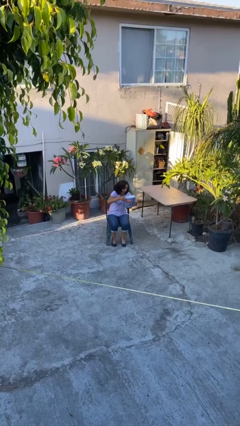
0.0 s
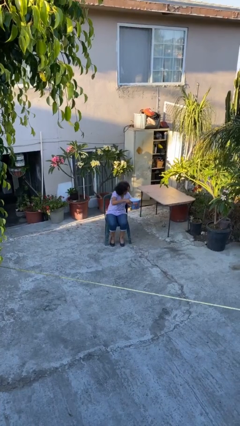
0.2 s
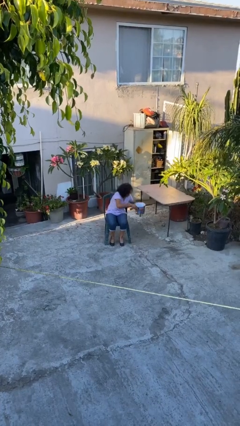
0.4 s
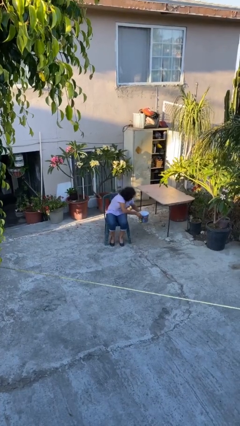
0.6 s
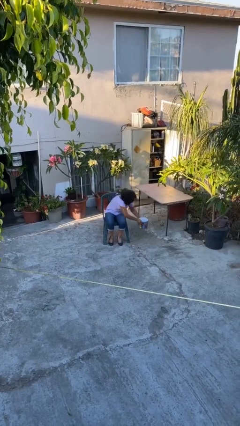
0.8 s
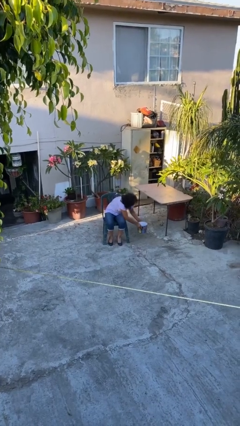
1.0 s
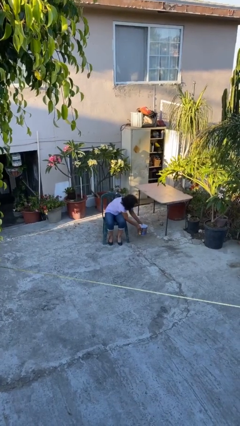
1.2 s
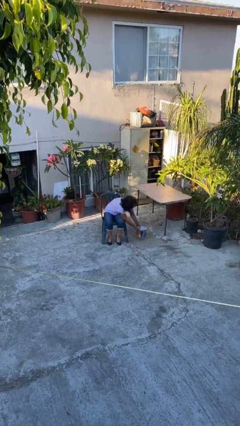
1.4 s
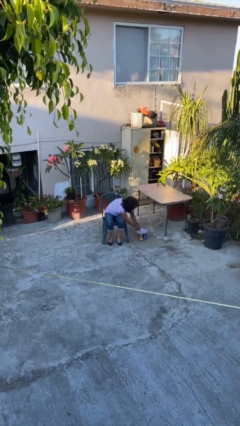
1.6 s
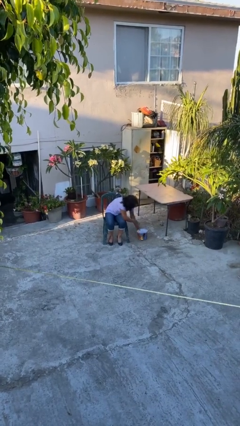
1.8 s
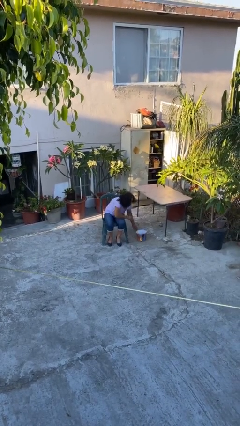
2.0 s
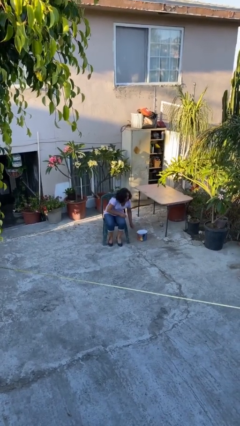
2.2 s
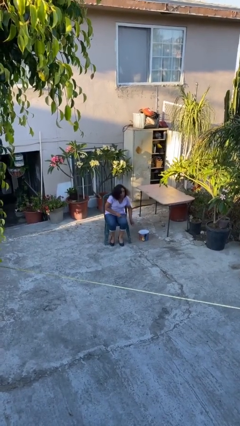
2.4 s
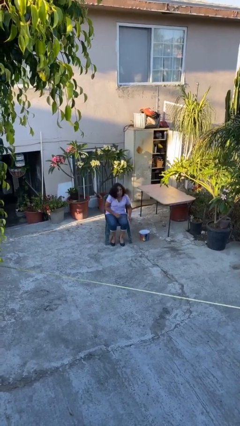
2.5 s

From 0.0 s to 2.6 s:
person puts down object on floor

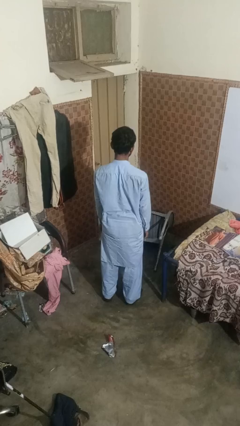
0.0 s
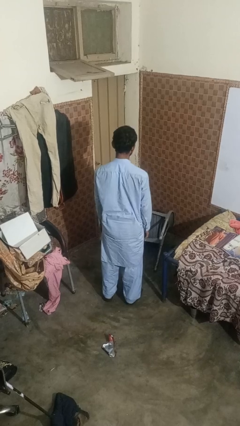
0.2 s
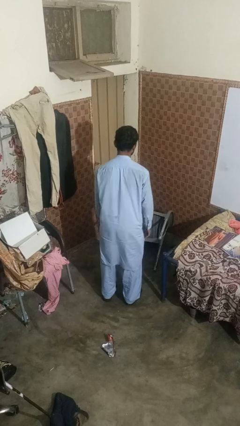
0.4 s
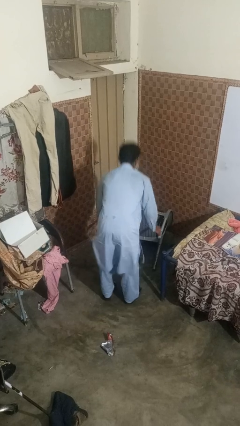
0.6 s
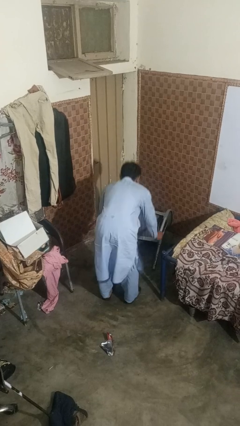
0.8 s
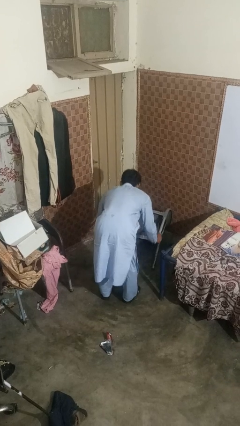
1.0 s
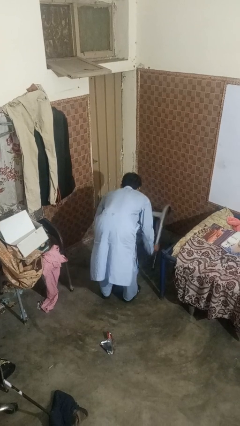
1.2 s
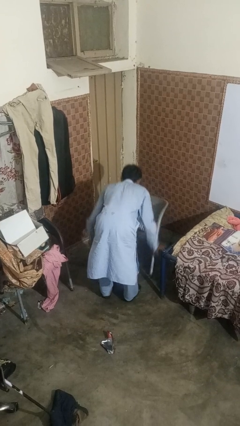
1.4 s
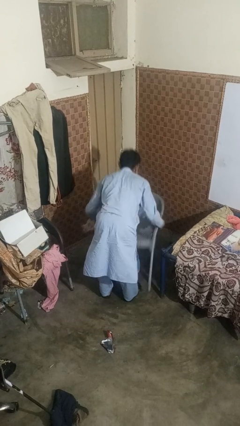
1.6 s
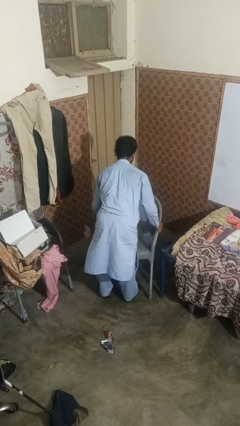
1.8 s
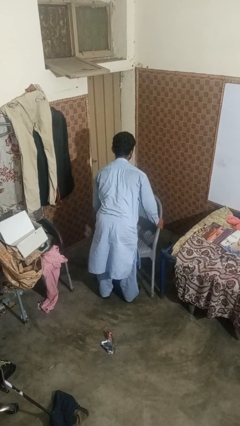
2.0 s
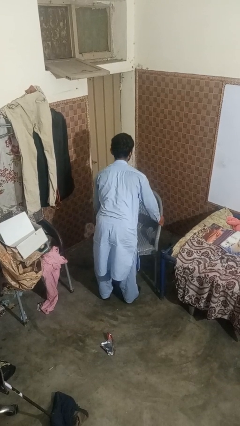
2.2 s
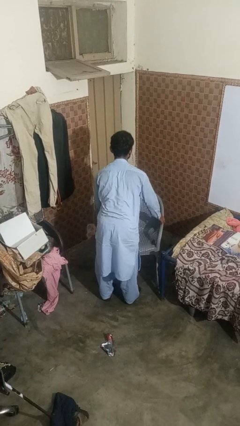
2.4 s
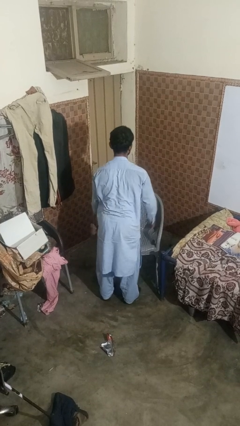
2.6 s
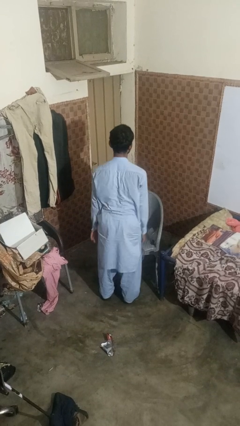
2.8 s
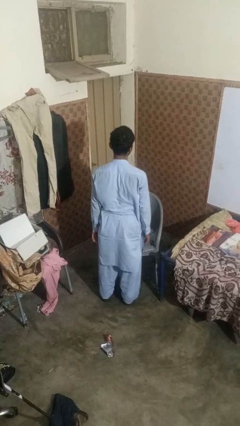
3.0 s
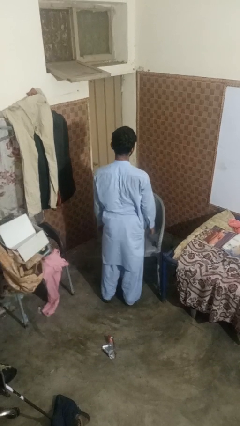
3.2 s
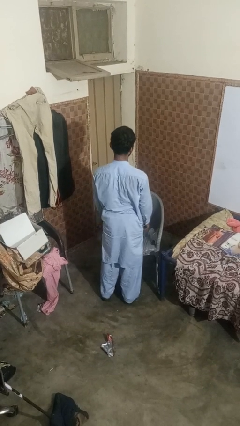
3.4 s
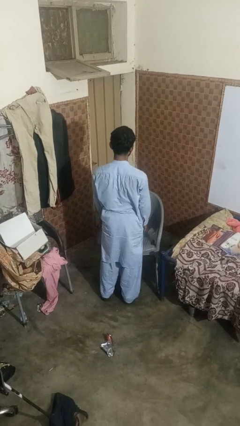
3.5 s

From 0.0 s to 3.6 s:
person sets upright furniture

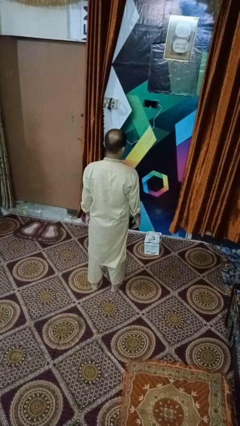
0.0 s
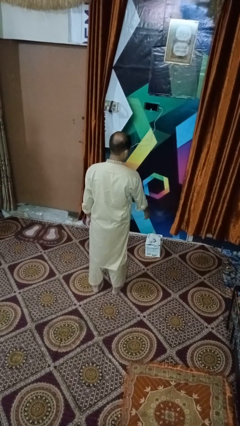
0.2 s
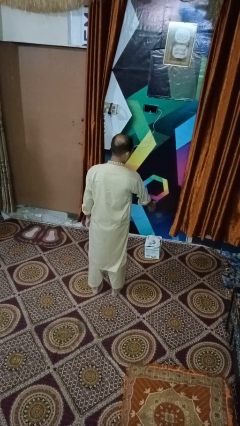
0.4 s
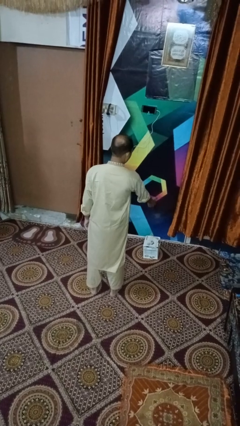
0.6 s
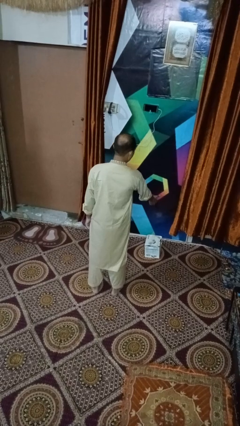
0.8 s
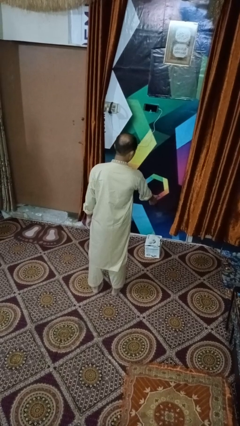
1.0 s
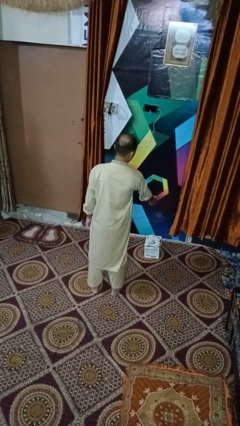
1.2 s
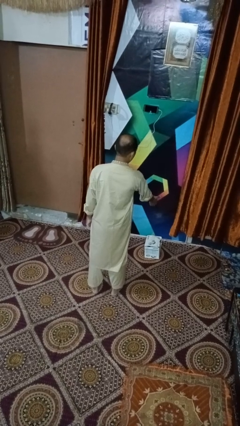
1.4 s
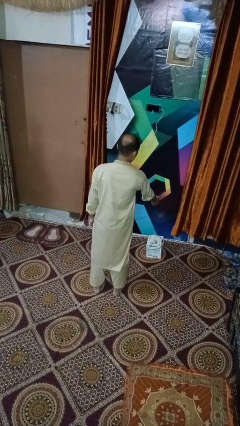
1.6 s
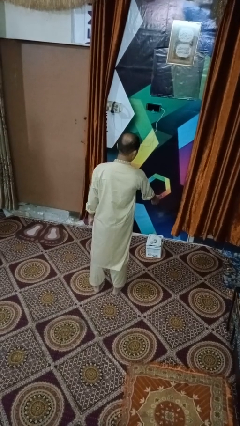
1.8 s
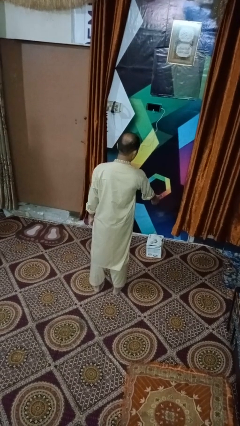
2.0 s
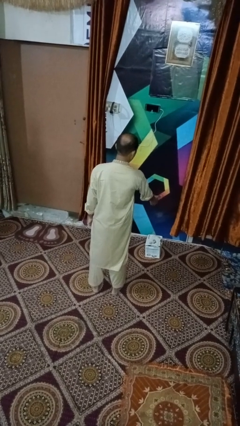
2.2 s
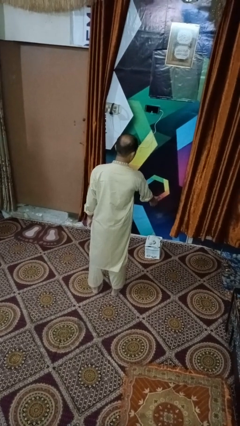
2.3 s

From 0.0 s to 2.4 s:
person waves hand over object

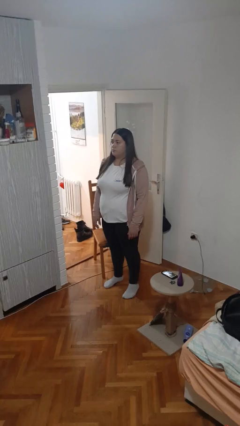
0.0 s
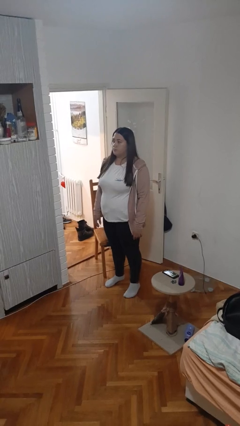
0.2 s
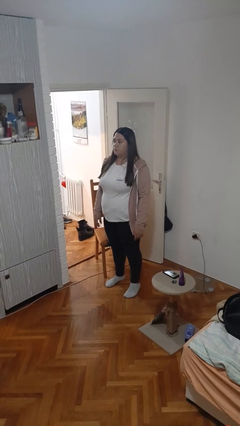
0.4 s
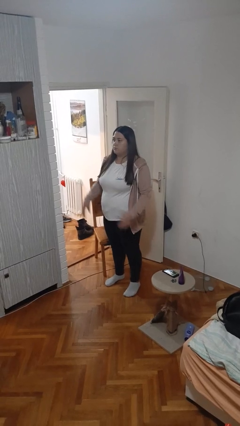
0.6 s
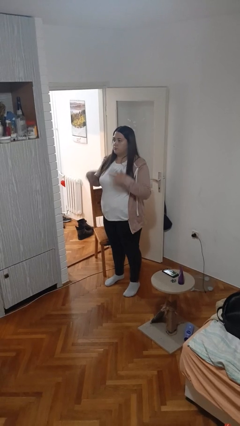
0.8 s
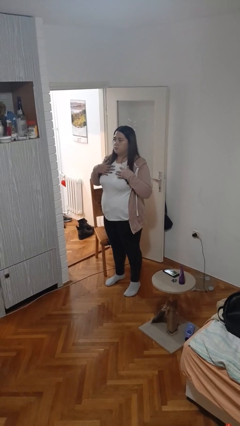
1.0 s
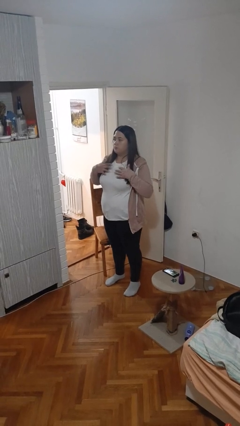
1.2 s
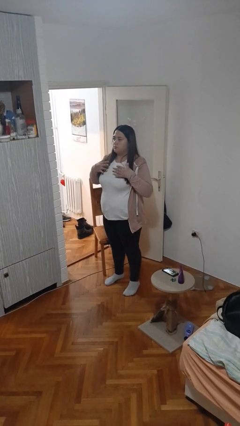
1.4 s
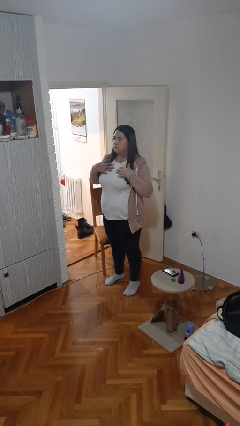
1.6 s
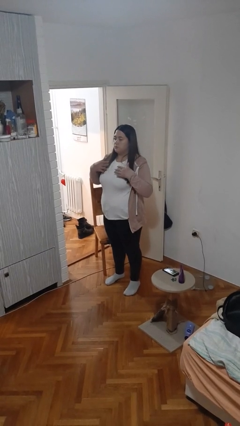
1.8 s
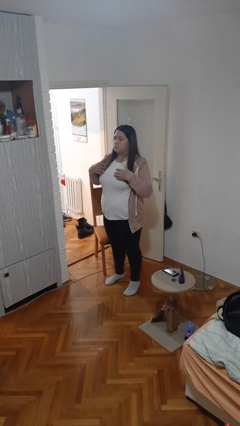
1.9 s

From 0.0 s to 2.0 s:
person drums on chest

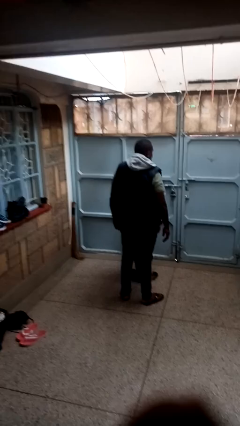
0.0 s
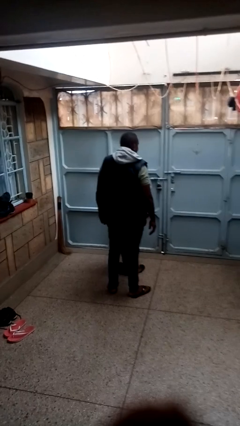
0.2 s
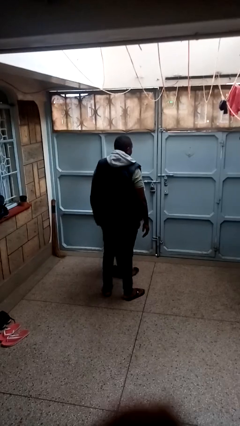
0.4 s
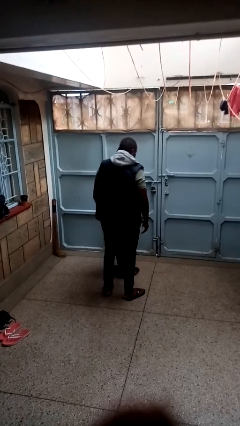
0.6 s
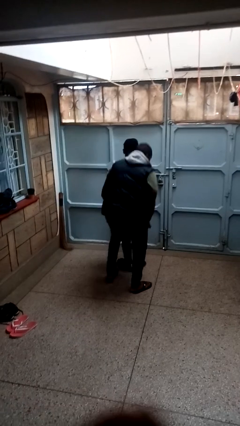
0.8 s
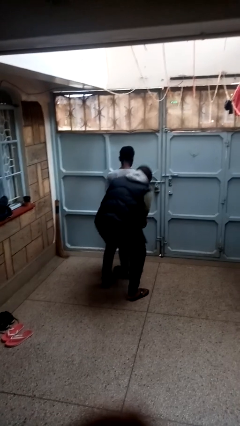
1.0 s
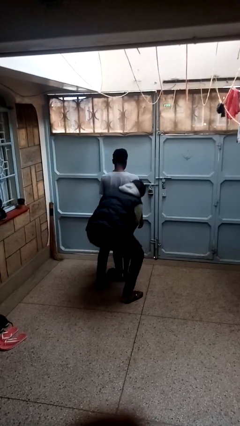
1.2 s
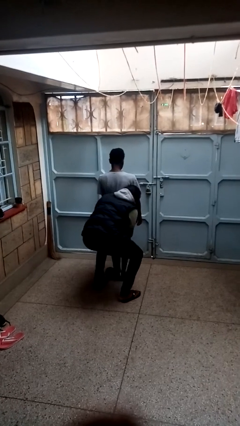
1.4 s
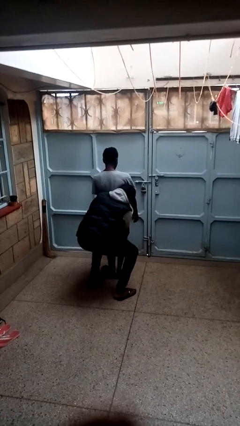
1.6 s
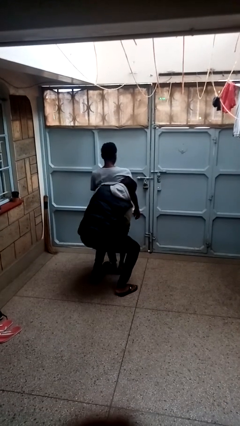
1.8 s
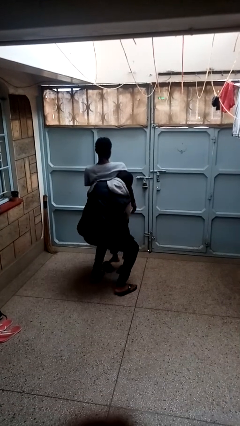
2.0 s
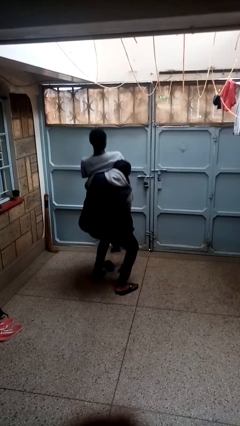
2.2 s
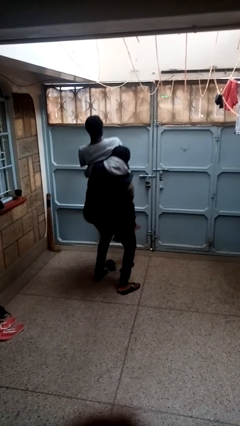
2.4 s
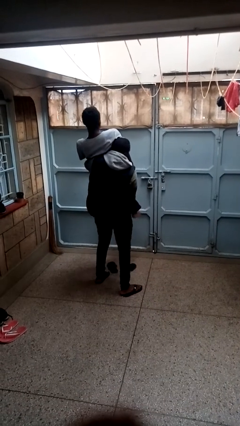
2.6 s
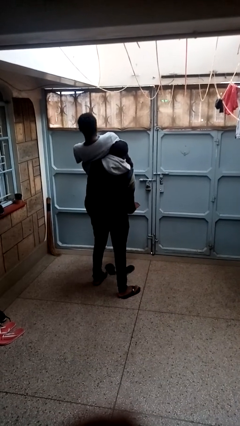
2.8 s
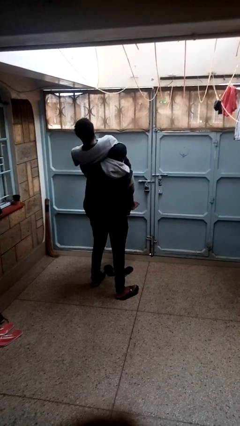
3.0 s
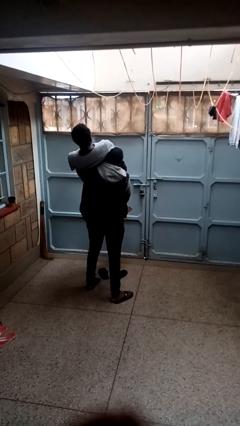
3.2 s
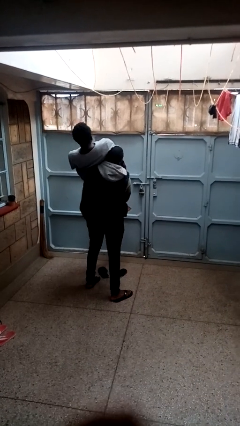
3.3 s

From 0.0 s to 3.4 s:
person carries person over shoulder

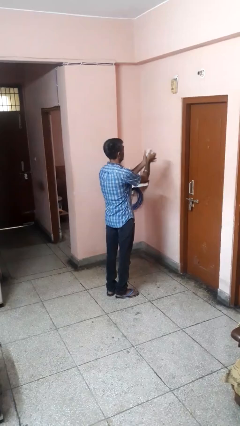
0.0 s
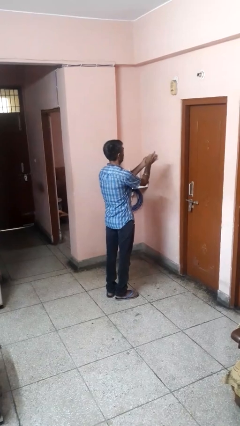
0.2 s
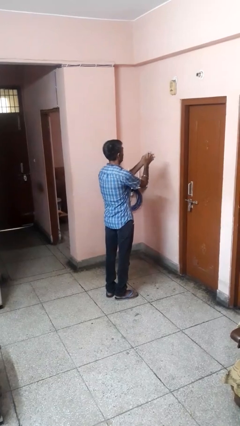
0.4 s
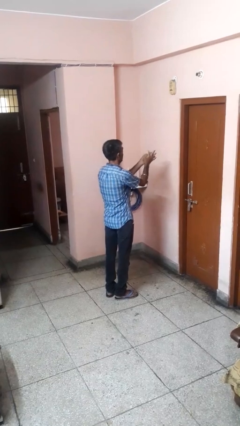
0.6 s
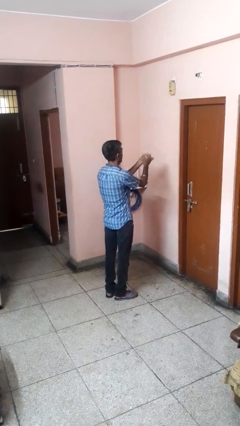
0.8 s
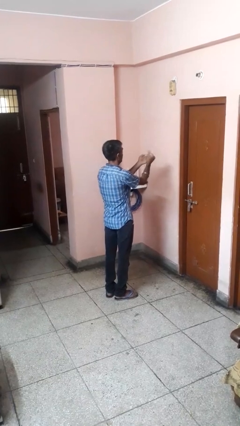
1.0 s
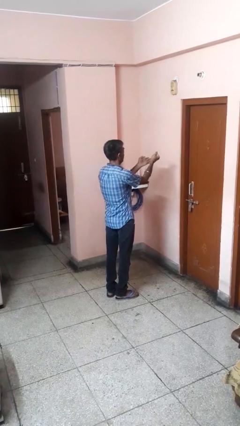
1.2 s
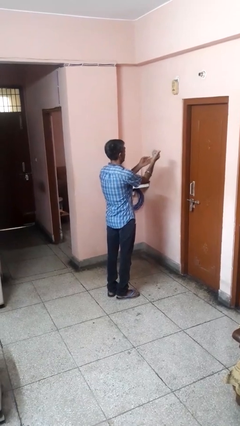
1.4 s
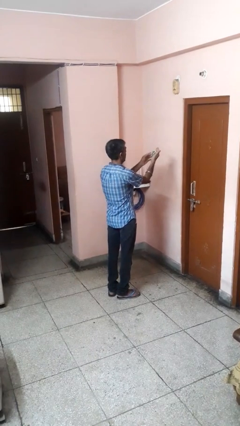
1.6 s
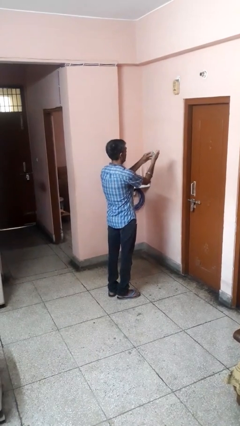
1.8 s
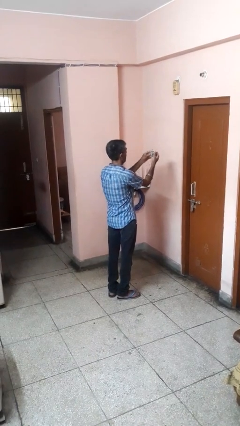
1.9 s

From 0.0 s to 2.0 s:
person crumples paper

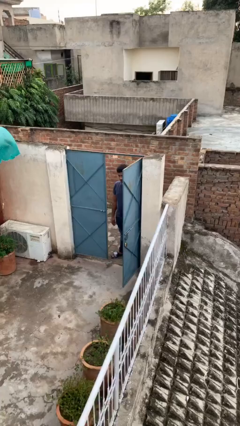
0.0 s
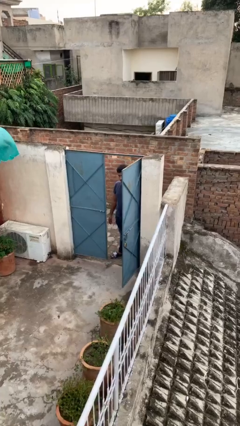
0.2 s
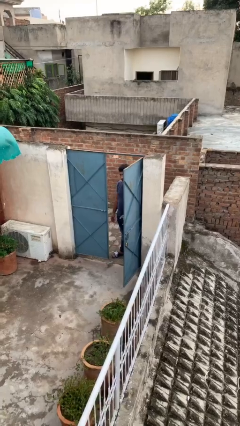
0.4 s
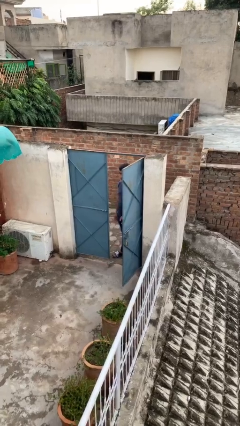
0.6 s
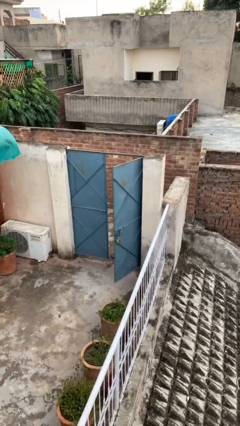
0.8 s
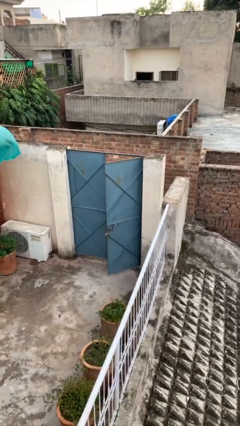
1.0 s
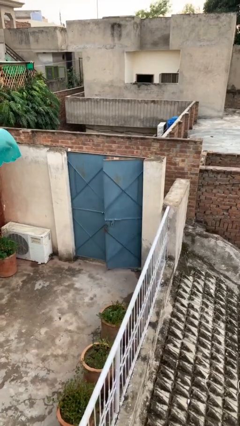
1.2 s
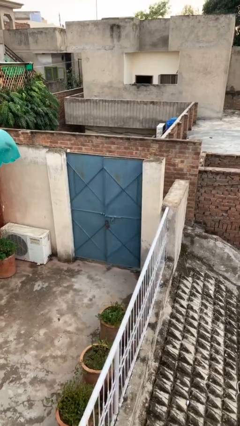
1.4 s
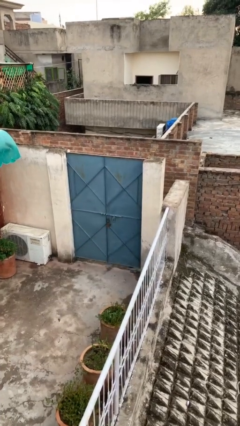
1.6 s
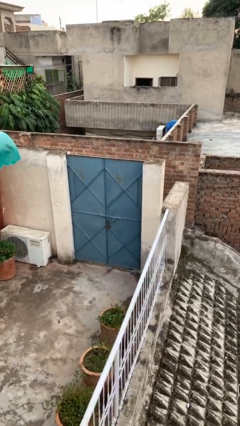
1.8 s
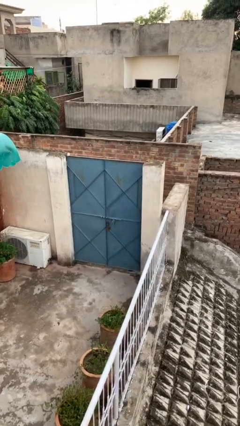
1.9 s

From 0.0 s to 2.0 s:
person closes facility door
